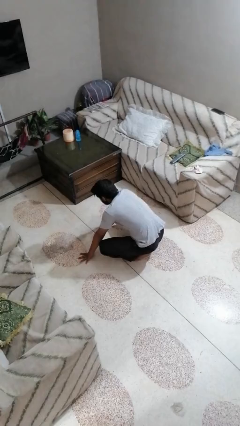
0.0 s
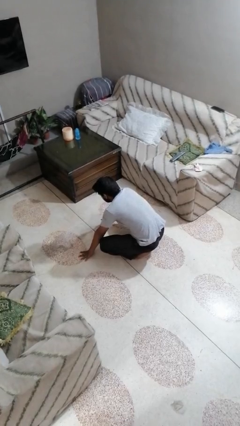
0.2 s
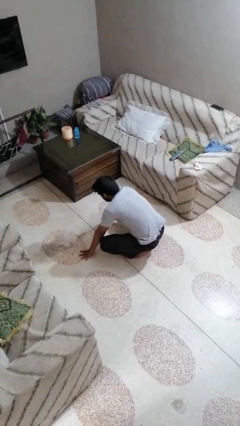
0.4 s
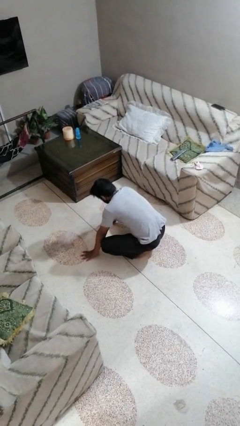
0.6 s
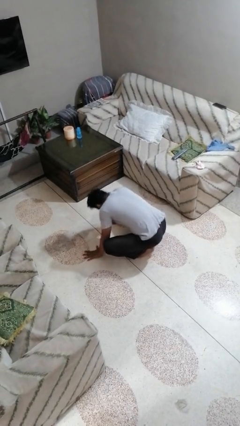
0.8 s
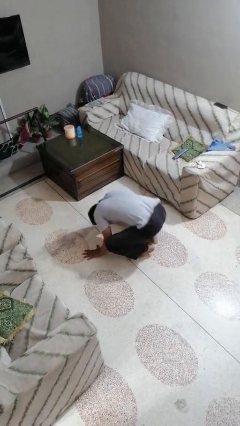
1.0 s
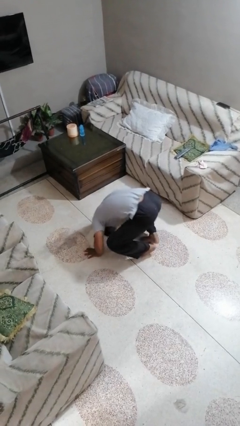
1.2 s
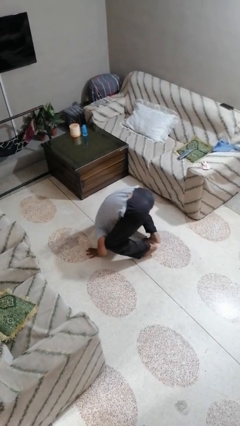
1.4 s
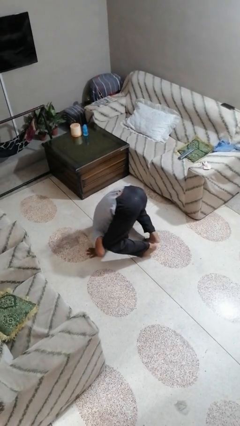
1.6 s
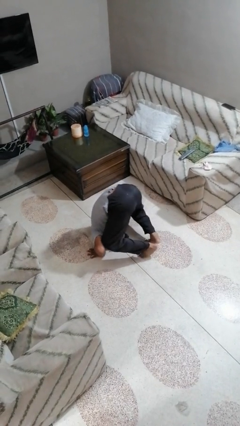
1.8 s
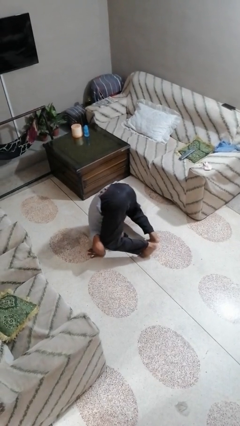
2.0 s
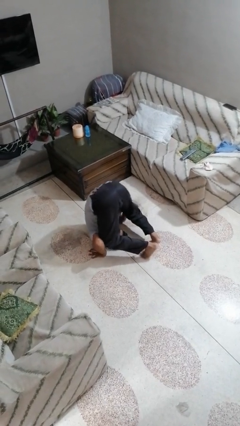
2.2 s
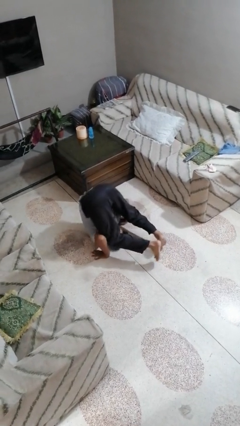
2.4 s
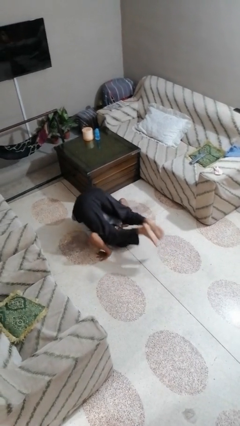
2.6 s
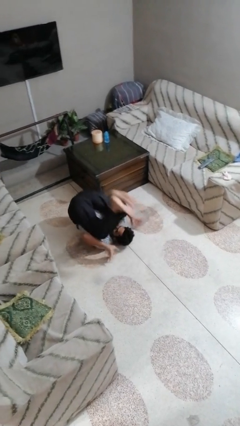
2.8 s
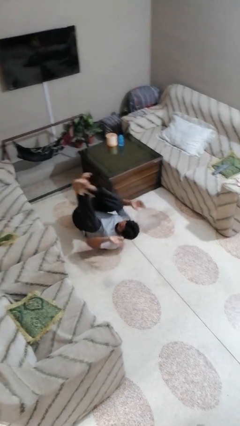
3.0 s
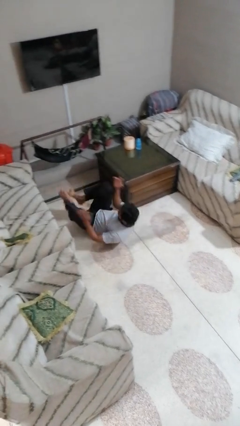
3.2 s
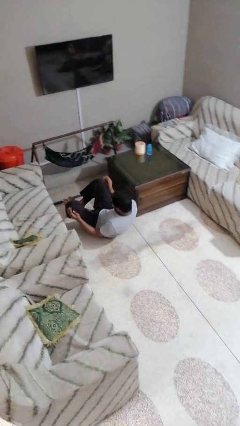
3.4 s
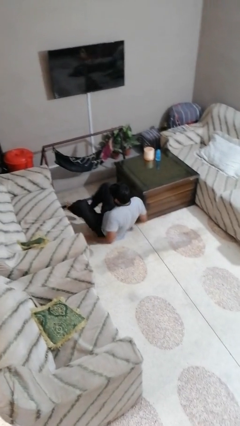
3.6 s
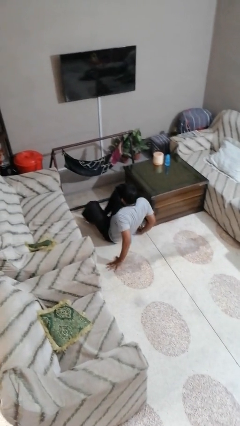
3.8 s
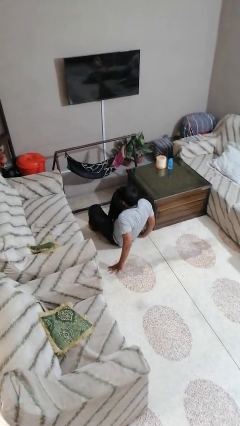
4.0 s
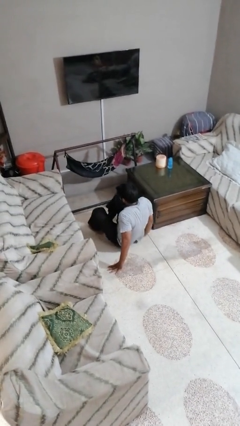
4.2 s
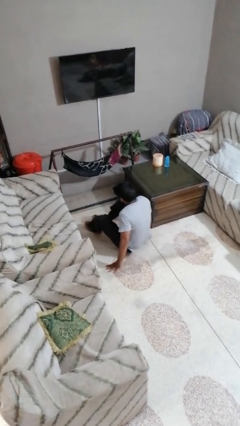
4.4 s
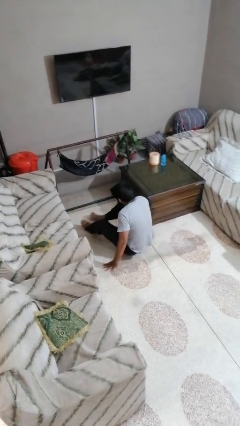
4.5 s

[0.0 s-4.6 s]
person somersaults

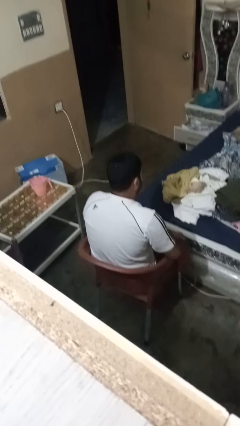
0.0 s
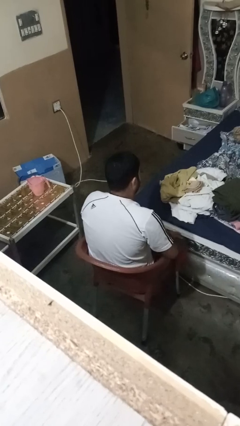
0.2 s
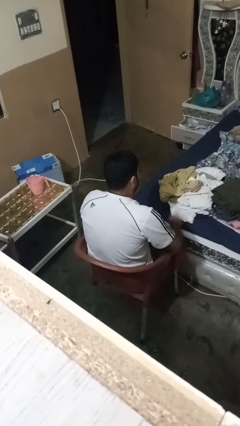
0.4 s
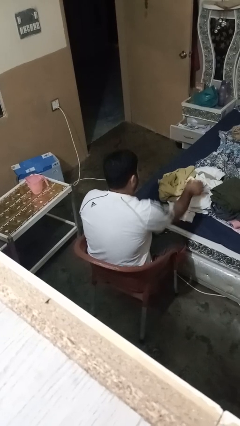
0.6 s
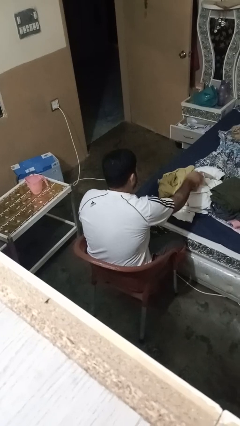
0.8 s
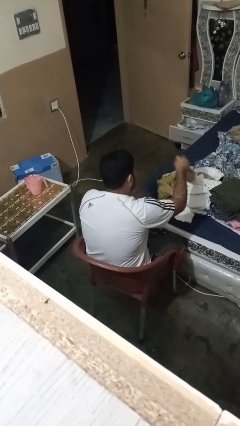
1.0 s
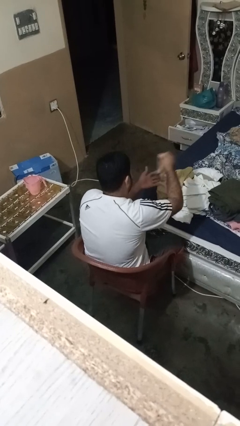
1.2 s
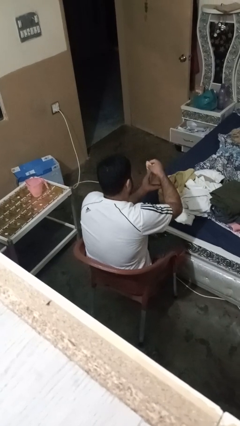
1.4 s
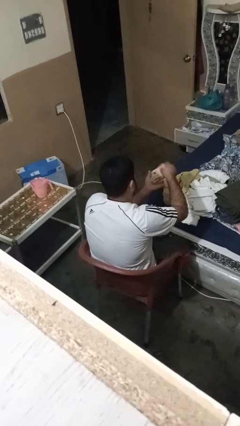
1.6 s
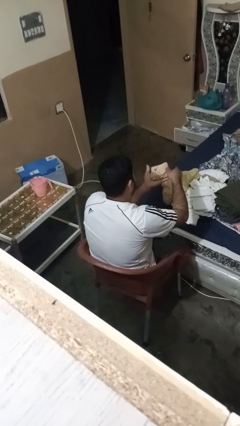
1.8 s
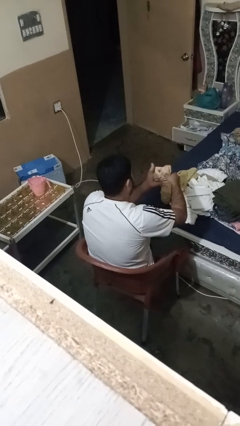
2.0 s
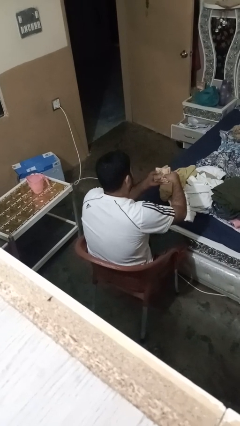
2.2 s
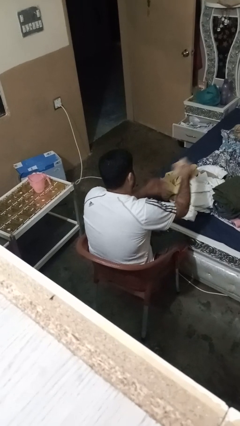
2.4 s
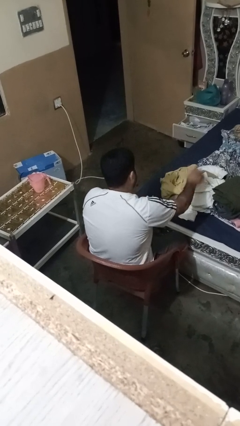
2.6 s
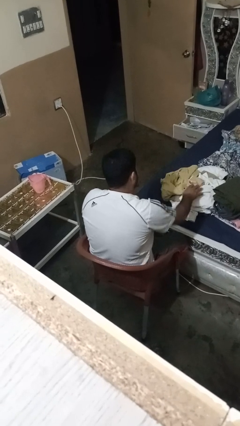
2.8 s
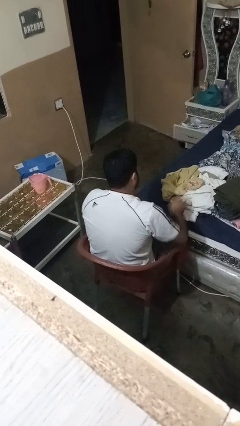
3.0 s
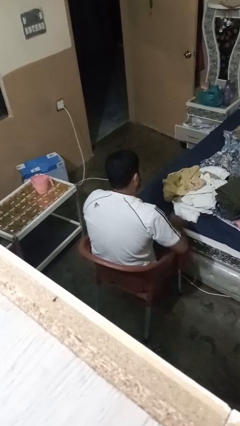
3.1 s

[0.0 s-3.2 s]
person folds socks

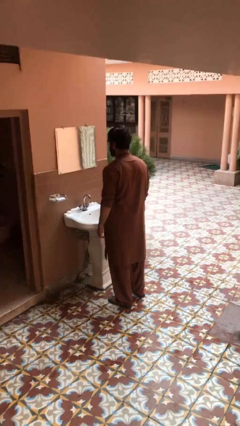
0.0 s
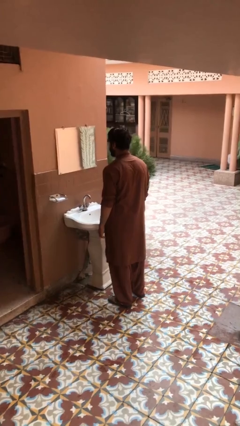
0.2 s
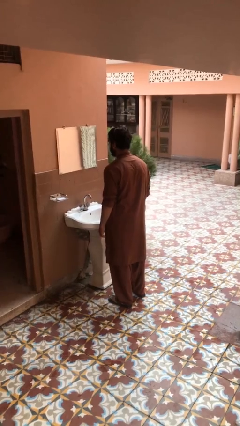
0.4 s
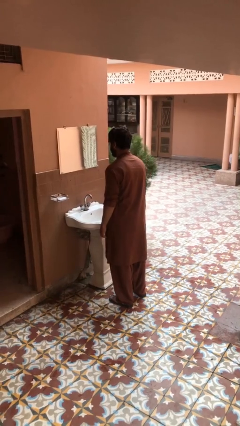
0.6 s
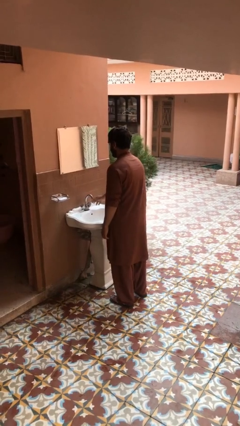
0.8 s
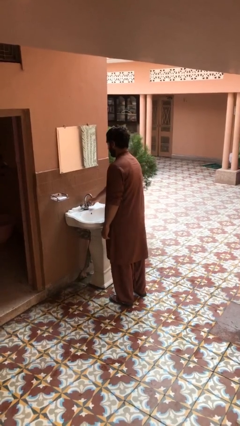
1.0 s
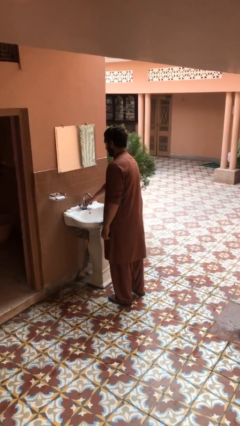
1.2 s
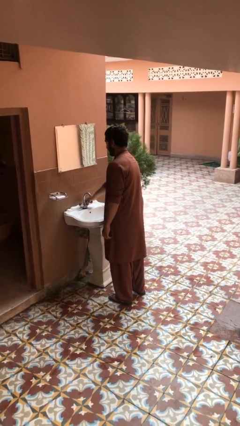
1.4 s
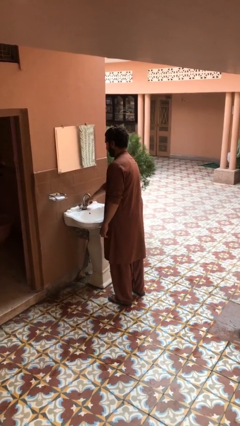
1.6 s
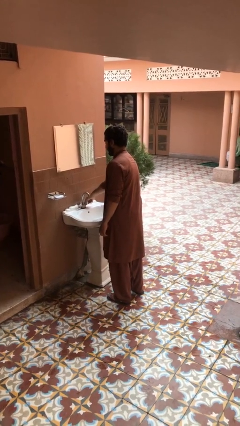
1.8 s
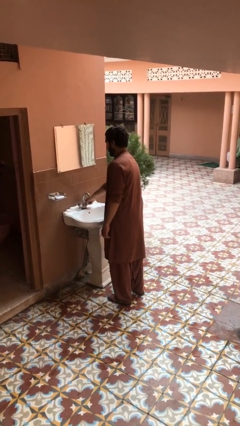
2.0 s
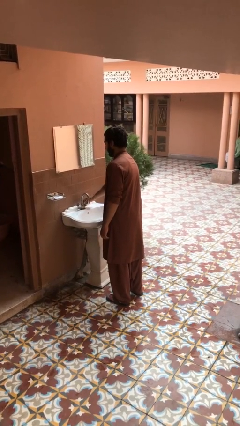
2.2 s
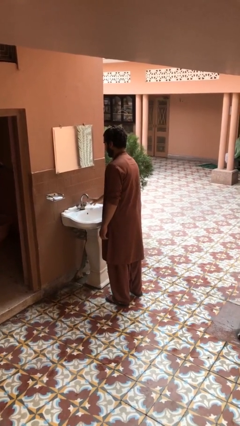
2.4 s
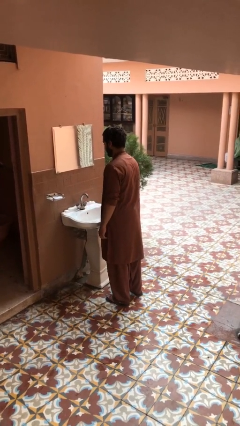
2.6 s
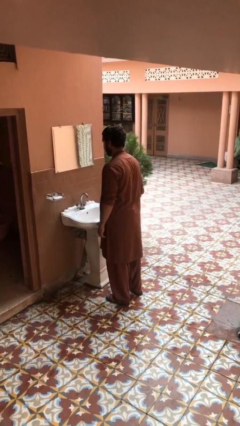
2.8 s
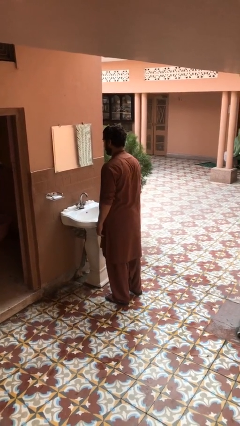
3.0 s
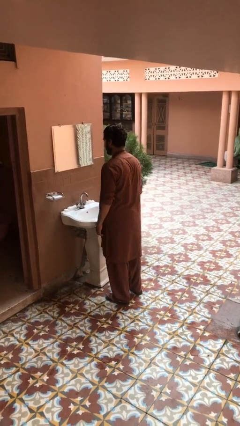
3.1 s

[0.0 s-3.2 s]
person turns on faucet

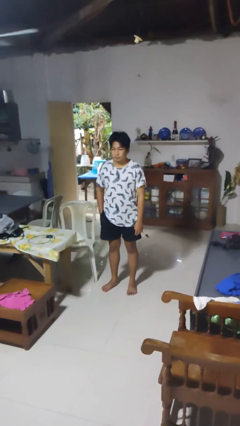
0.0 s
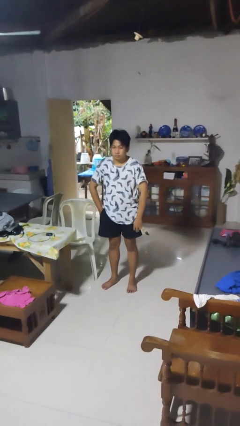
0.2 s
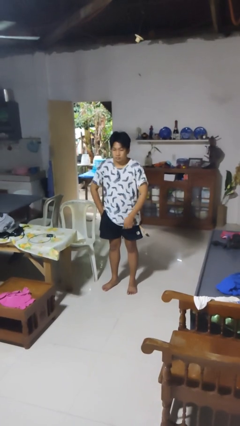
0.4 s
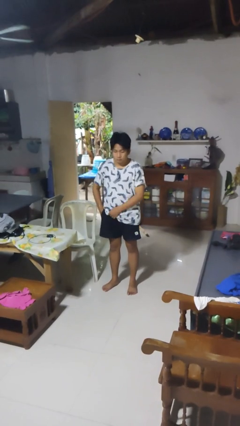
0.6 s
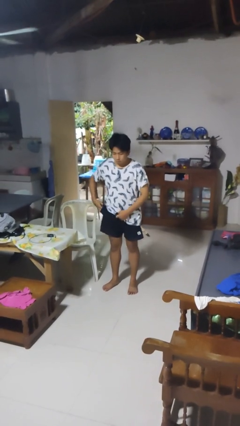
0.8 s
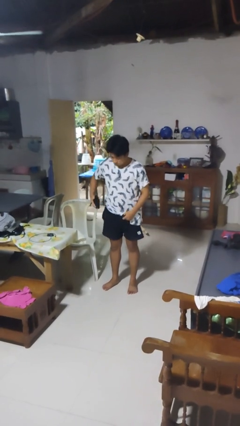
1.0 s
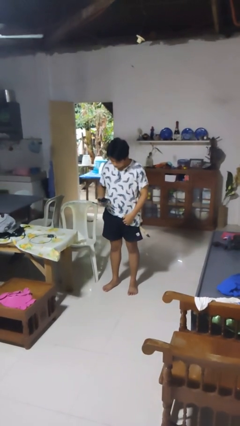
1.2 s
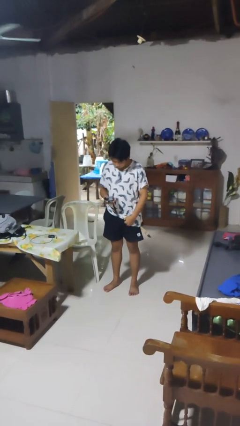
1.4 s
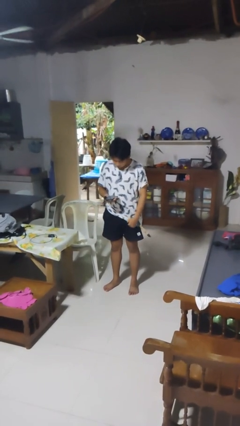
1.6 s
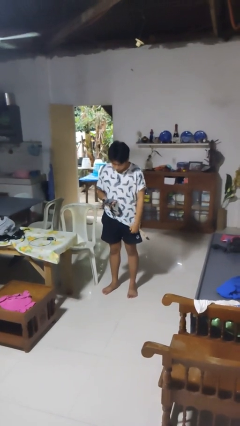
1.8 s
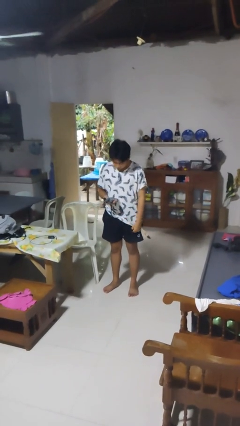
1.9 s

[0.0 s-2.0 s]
person takes phone from pocket

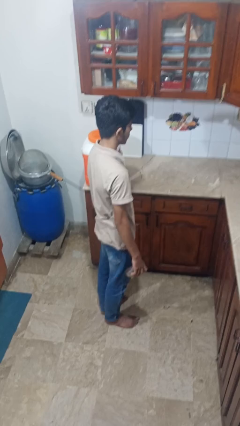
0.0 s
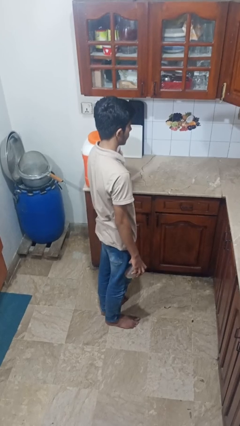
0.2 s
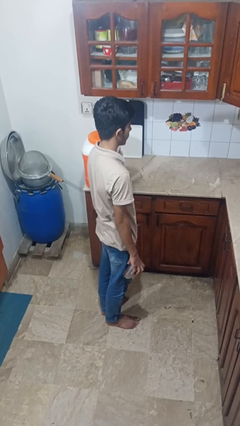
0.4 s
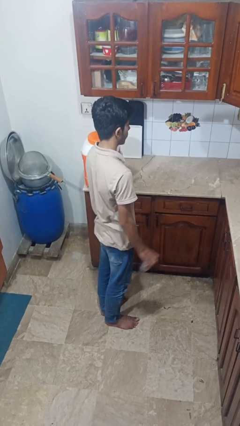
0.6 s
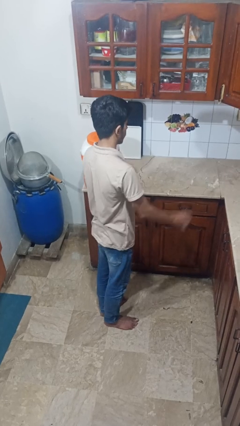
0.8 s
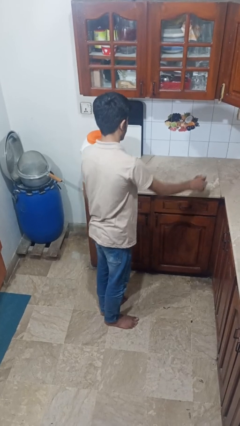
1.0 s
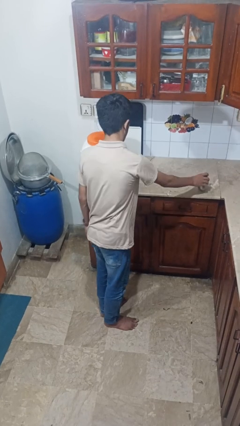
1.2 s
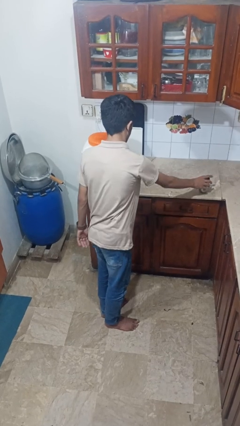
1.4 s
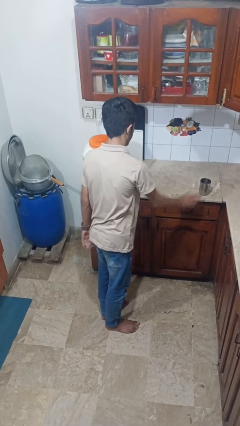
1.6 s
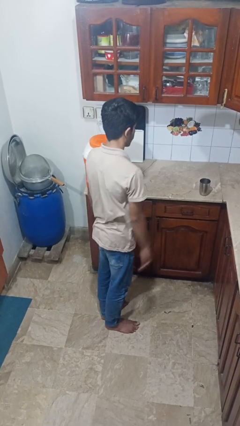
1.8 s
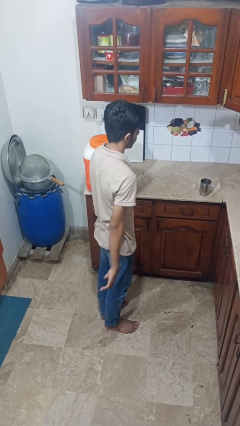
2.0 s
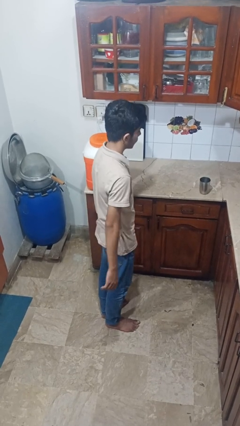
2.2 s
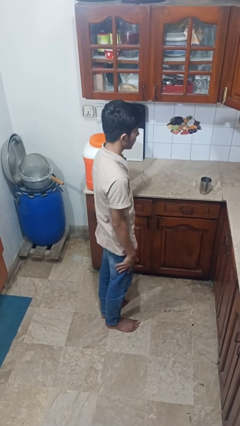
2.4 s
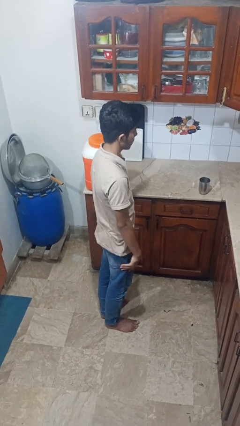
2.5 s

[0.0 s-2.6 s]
person puts down object on countertop

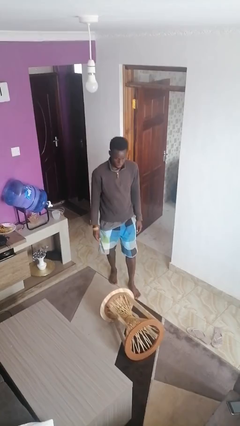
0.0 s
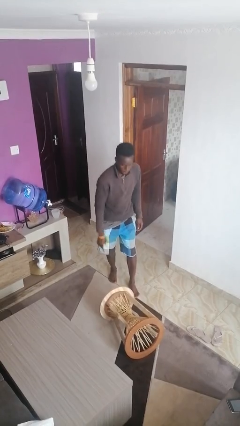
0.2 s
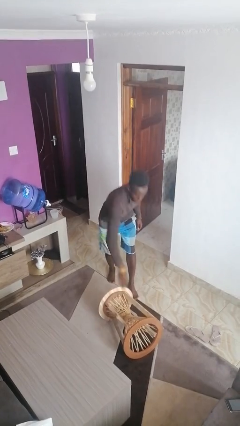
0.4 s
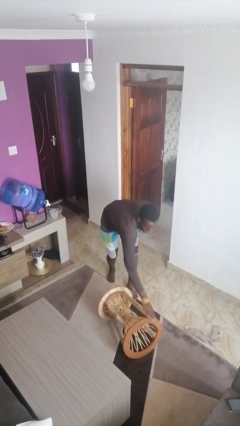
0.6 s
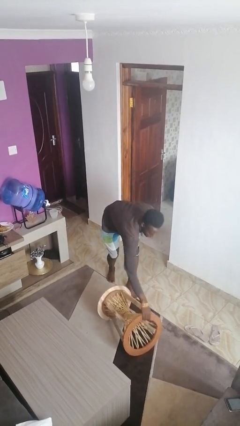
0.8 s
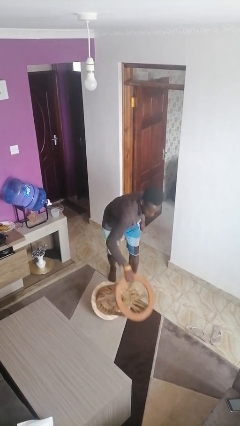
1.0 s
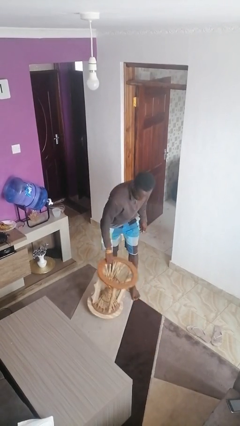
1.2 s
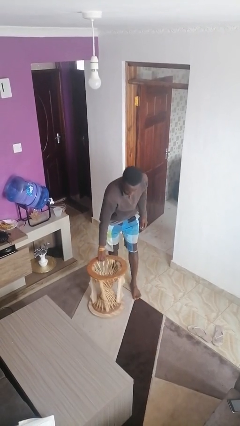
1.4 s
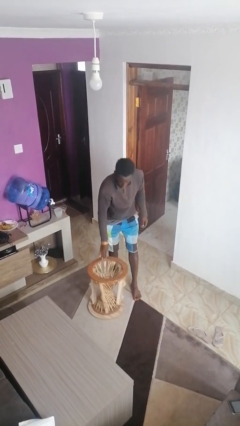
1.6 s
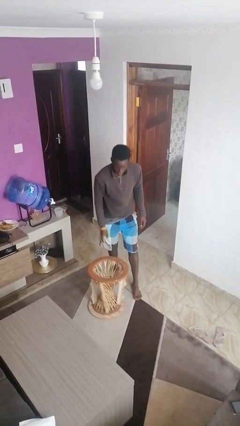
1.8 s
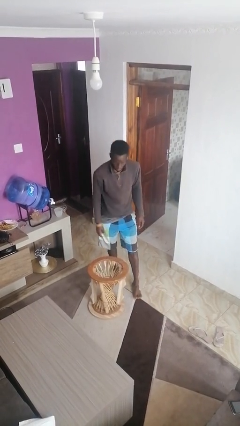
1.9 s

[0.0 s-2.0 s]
person sets upright furniture

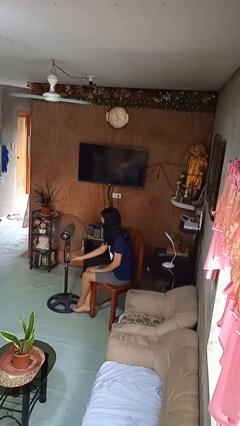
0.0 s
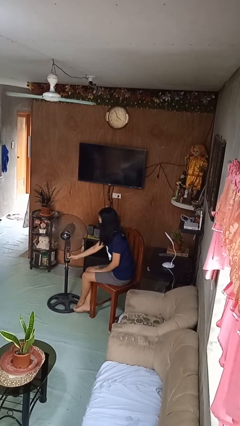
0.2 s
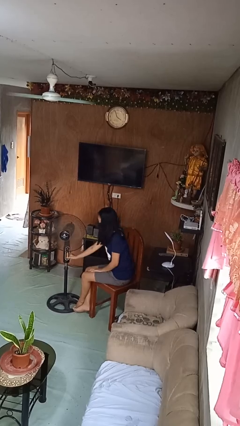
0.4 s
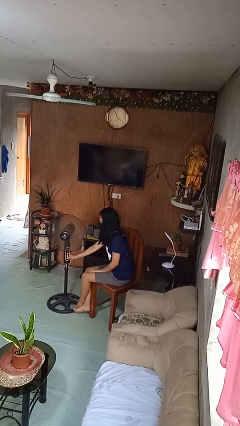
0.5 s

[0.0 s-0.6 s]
person turns off fan
